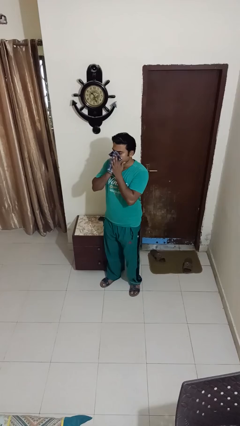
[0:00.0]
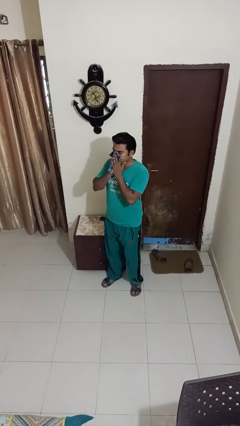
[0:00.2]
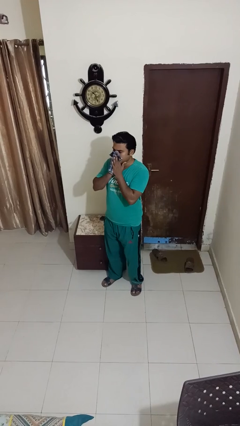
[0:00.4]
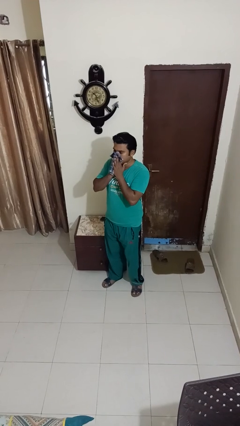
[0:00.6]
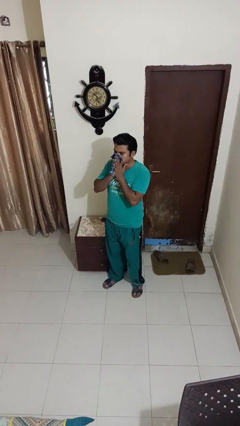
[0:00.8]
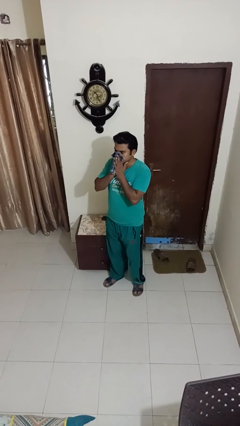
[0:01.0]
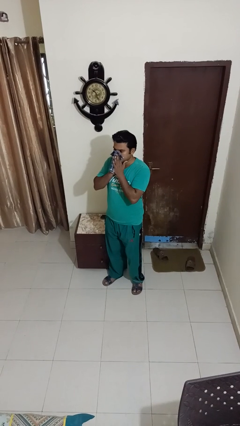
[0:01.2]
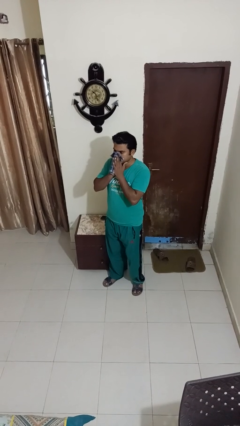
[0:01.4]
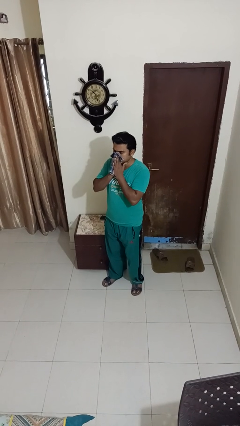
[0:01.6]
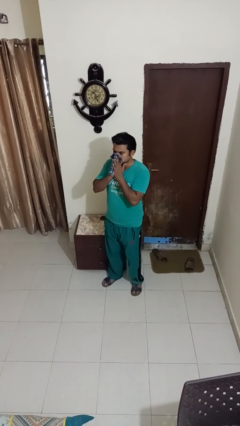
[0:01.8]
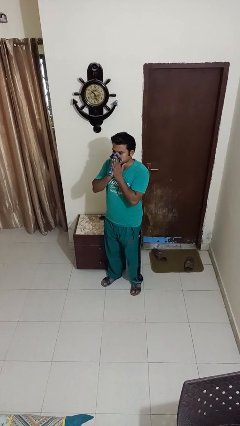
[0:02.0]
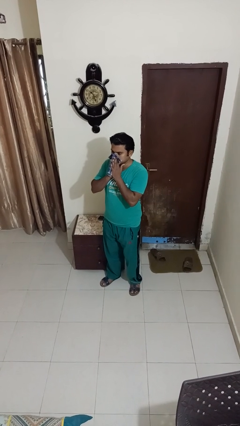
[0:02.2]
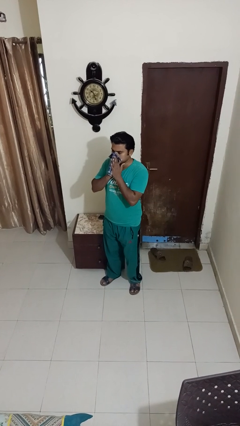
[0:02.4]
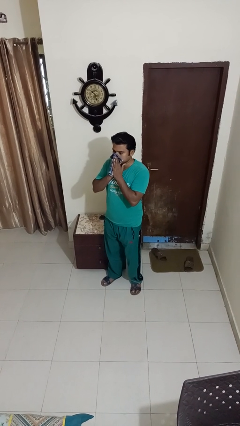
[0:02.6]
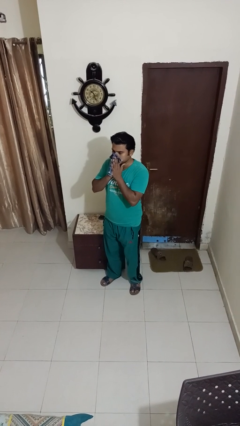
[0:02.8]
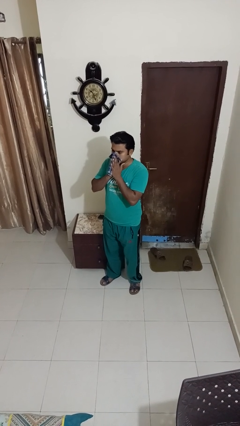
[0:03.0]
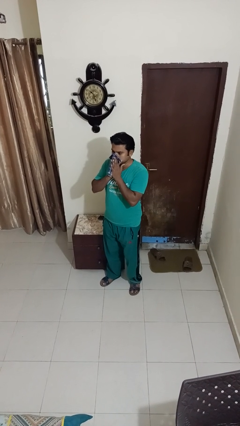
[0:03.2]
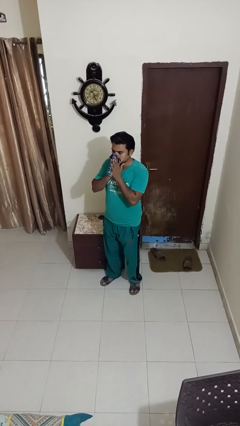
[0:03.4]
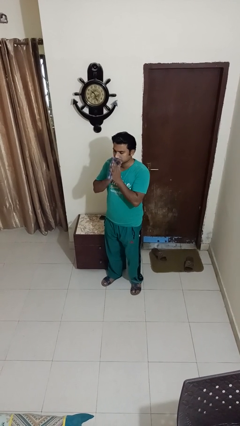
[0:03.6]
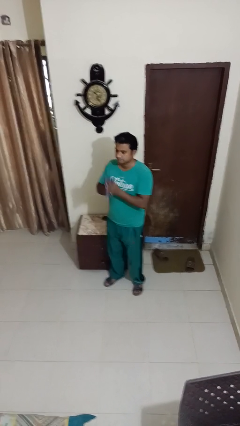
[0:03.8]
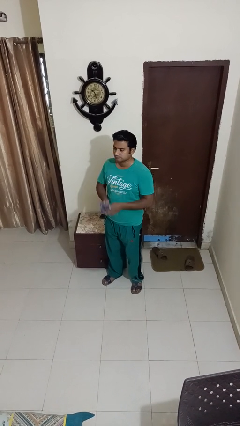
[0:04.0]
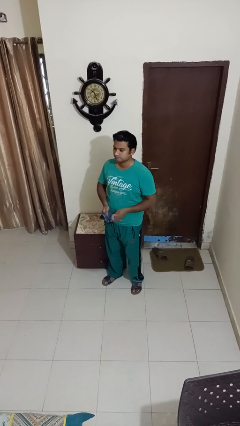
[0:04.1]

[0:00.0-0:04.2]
person blows nose

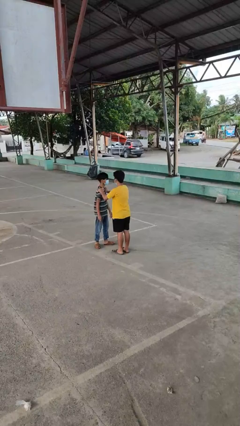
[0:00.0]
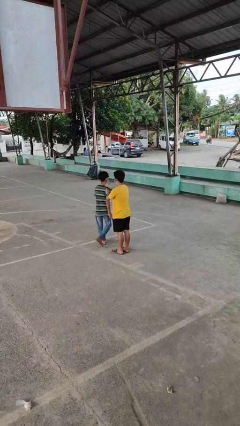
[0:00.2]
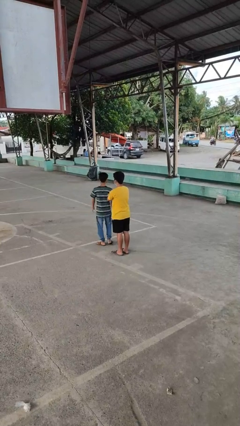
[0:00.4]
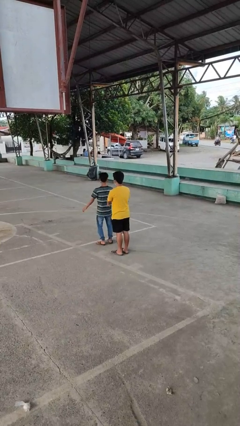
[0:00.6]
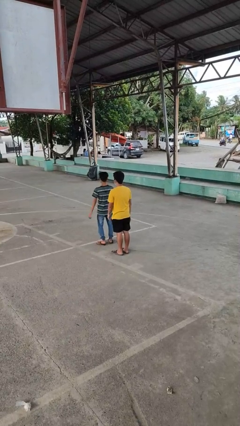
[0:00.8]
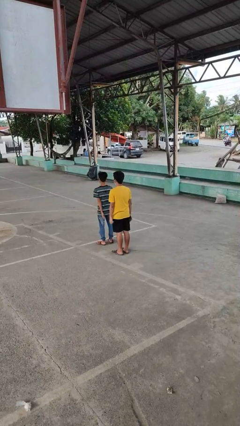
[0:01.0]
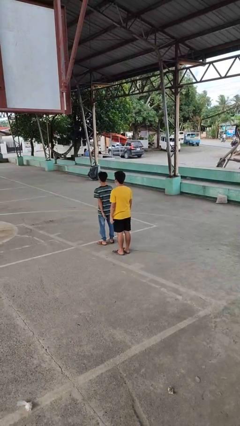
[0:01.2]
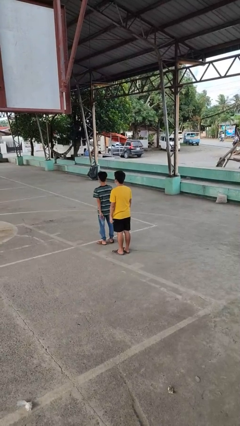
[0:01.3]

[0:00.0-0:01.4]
person spins person around

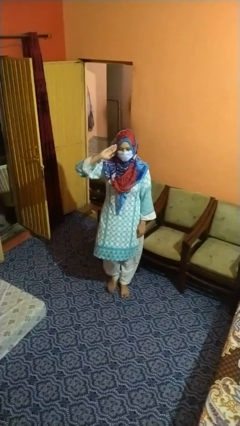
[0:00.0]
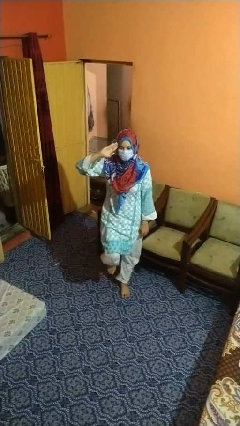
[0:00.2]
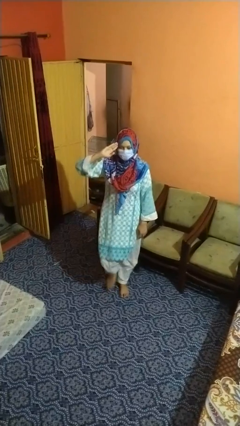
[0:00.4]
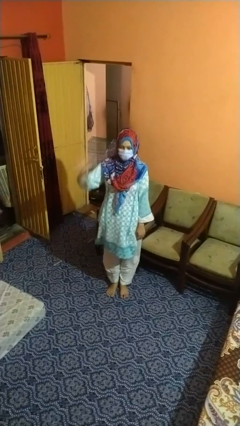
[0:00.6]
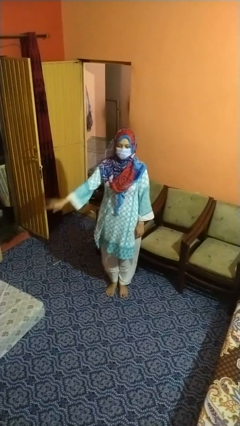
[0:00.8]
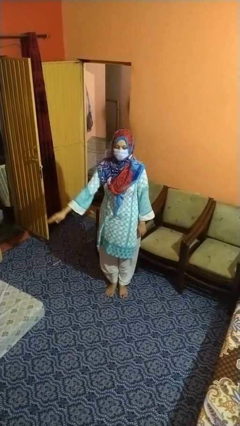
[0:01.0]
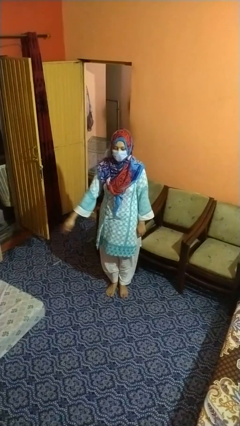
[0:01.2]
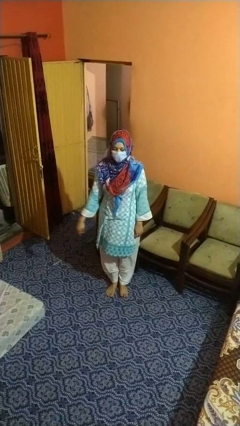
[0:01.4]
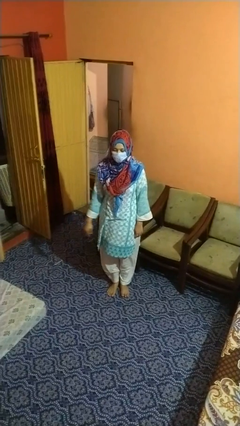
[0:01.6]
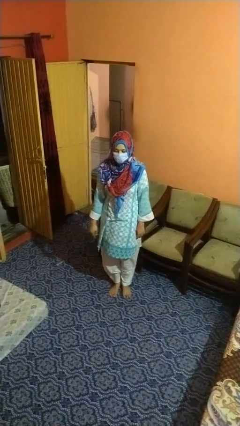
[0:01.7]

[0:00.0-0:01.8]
person salutes

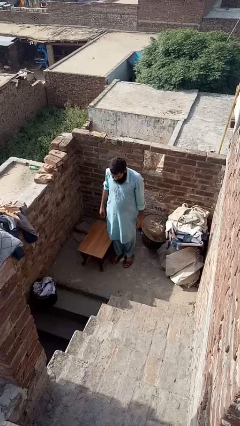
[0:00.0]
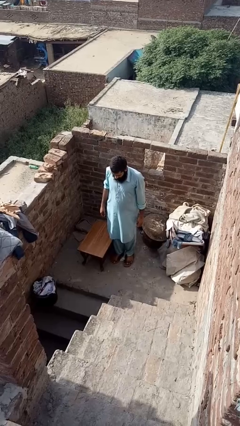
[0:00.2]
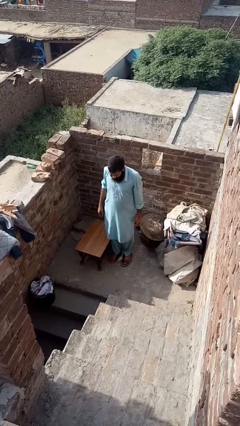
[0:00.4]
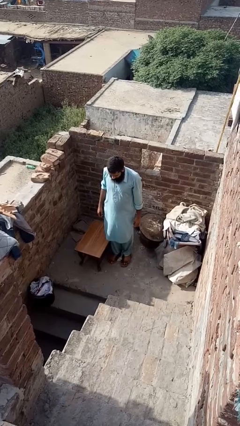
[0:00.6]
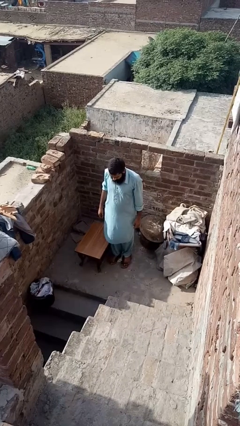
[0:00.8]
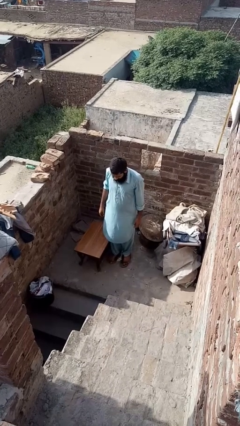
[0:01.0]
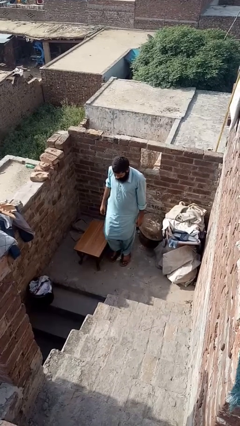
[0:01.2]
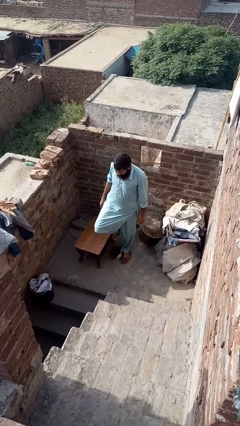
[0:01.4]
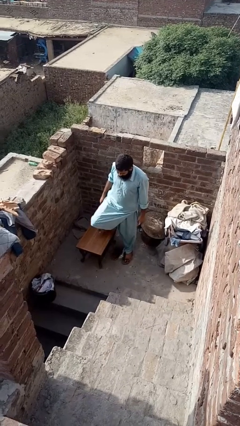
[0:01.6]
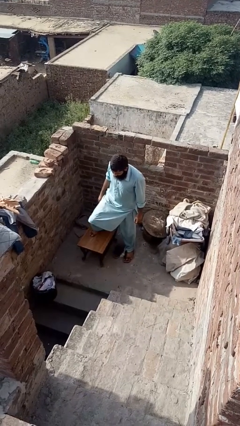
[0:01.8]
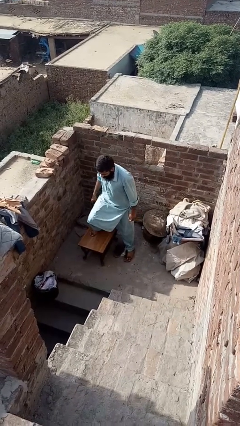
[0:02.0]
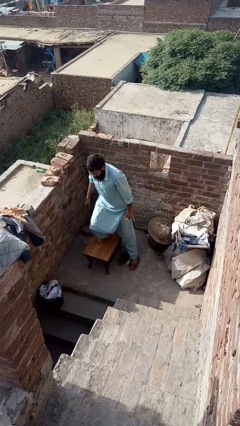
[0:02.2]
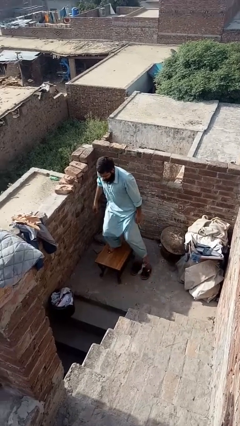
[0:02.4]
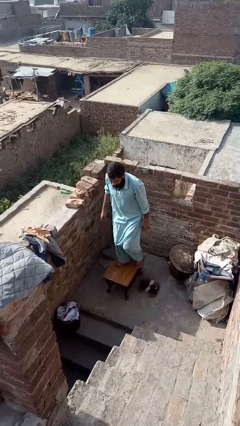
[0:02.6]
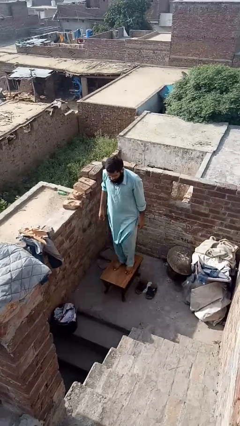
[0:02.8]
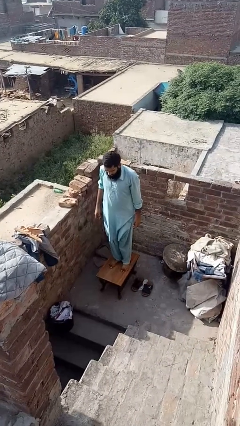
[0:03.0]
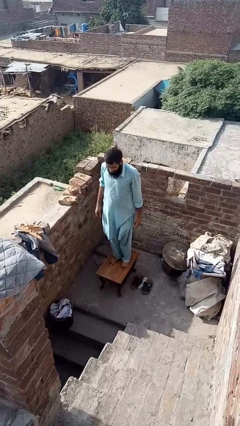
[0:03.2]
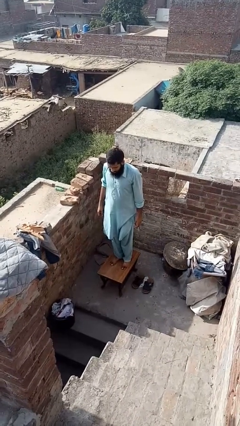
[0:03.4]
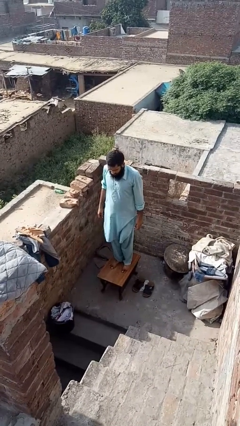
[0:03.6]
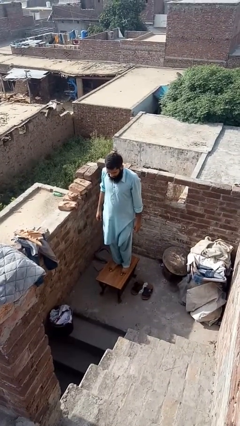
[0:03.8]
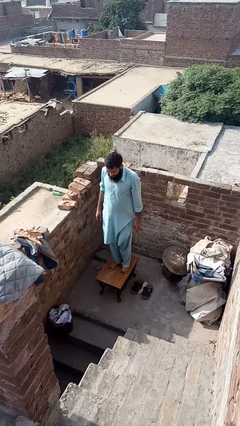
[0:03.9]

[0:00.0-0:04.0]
person climbs on table

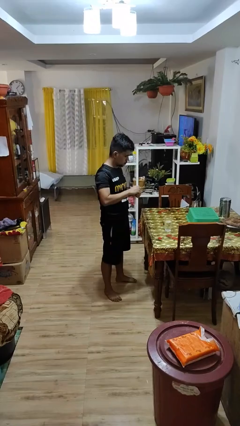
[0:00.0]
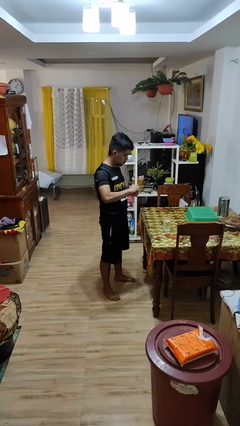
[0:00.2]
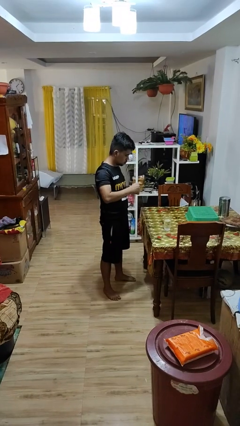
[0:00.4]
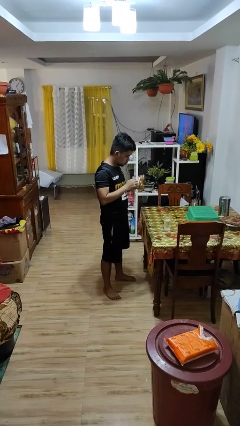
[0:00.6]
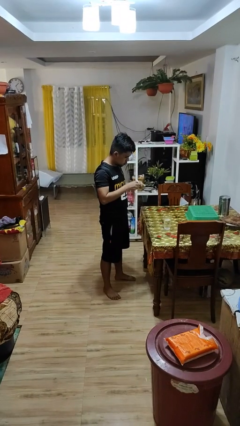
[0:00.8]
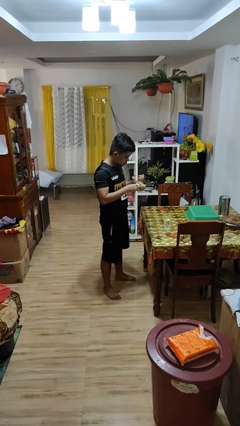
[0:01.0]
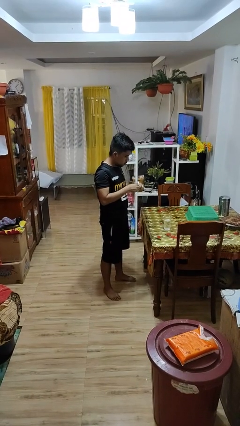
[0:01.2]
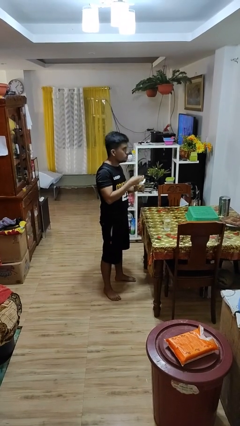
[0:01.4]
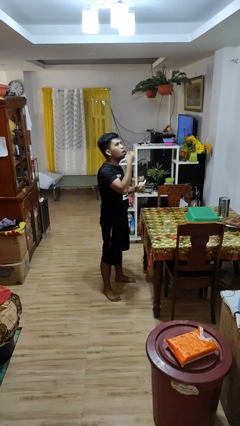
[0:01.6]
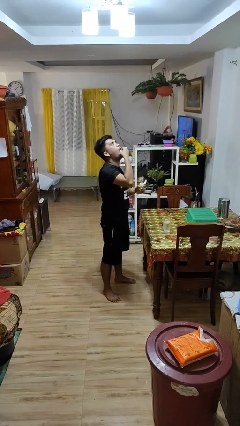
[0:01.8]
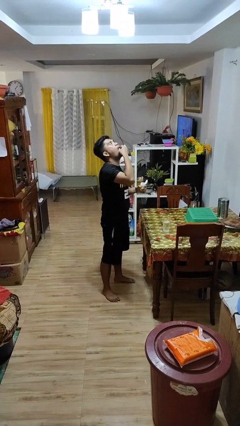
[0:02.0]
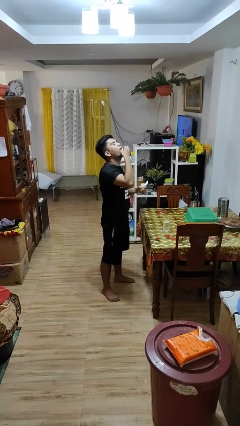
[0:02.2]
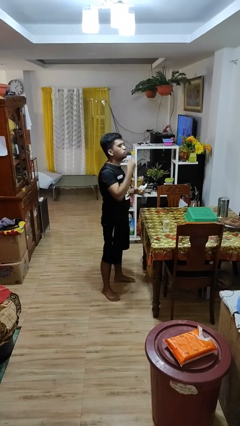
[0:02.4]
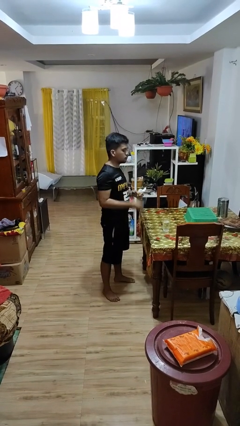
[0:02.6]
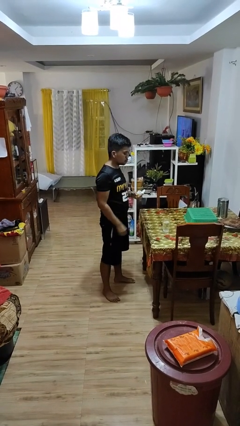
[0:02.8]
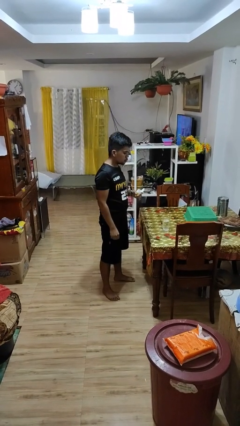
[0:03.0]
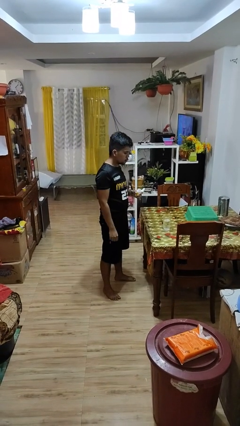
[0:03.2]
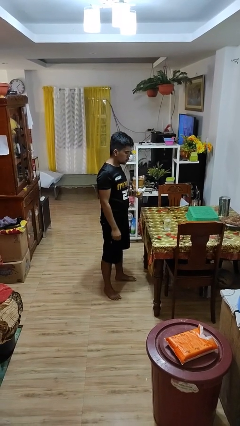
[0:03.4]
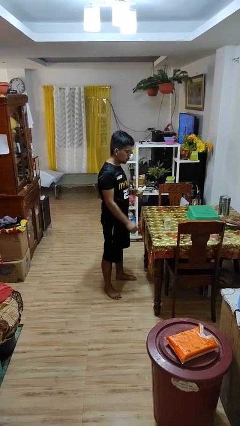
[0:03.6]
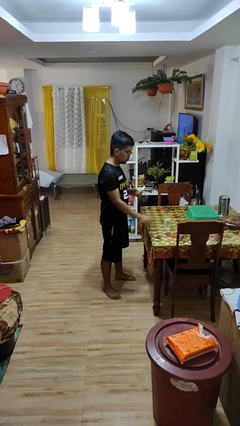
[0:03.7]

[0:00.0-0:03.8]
person takes medicine pills

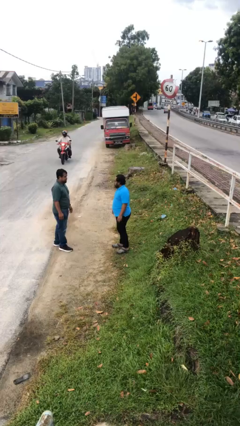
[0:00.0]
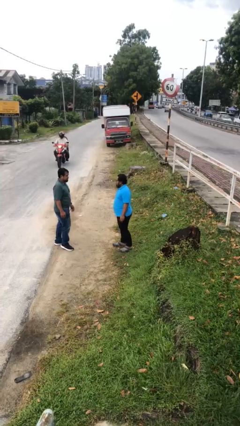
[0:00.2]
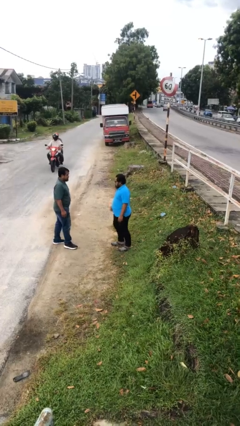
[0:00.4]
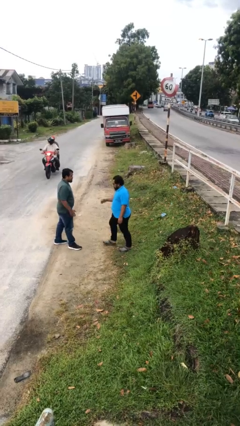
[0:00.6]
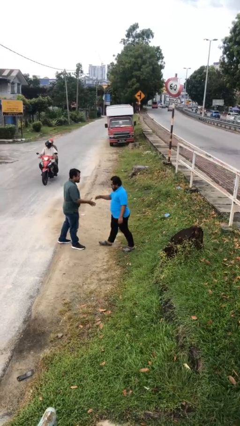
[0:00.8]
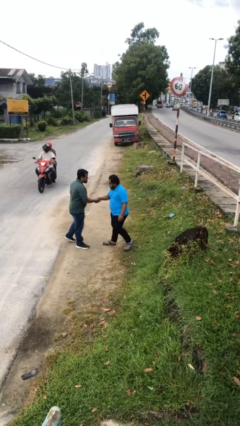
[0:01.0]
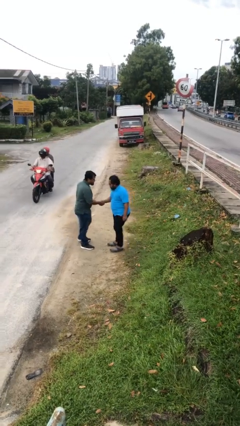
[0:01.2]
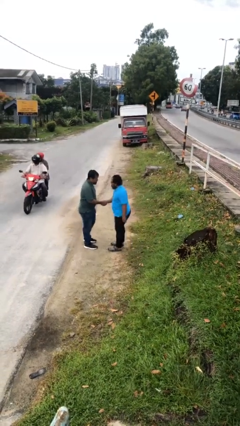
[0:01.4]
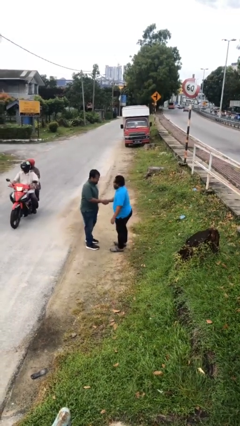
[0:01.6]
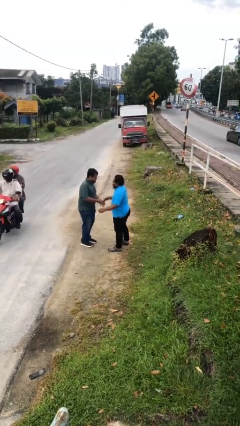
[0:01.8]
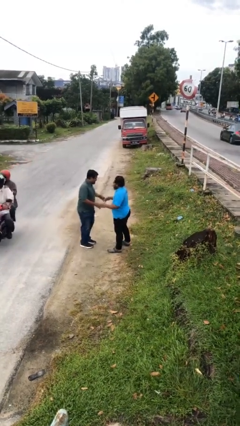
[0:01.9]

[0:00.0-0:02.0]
person shakes hand
